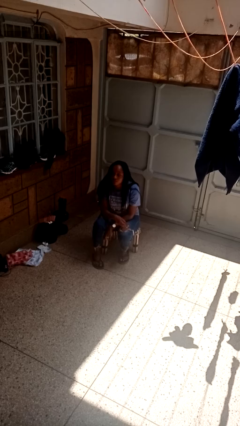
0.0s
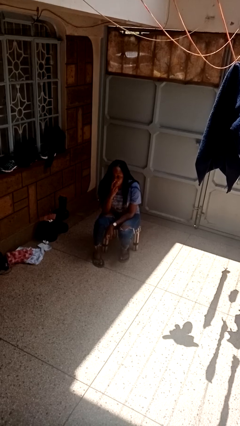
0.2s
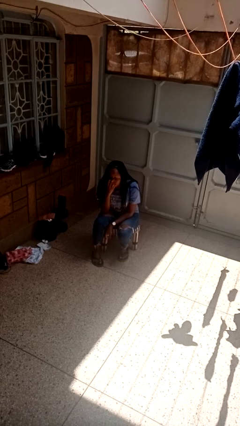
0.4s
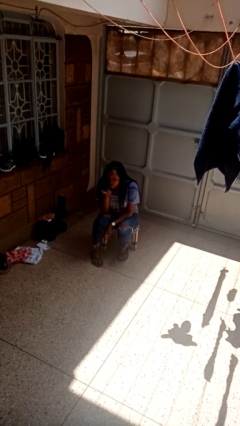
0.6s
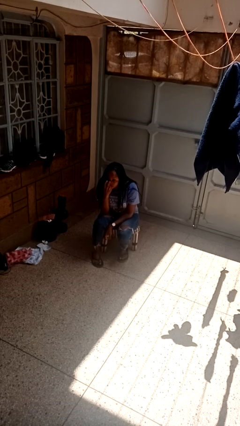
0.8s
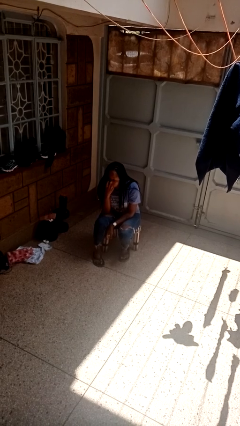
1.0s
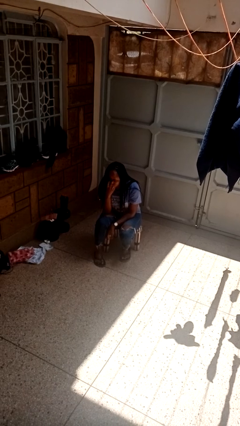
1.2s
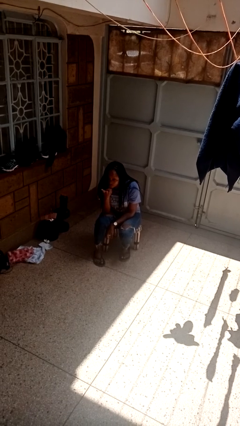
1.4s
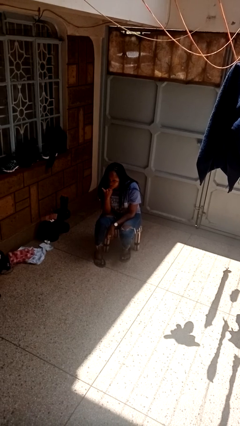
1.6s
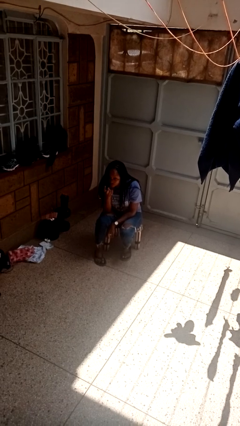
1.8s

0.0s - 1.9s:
person gestures watch closely

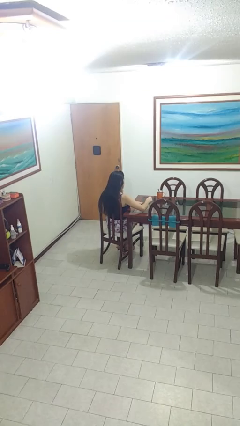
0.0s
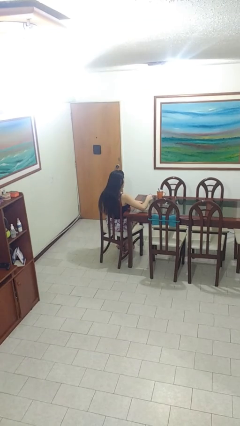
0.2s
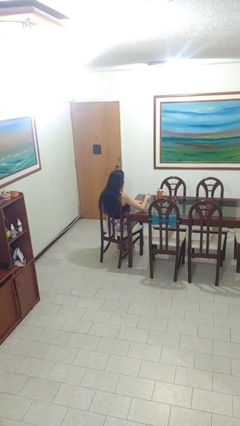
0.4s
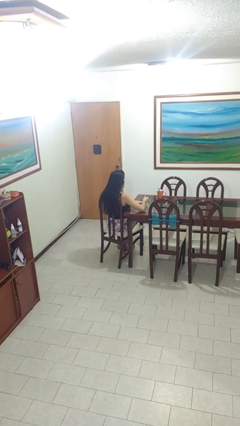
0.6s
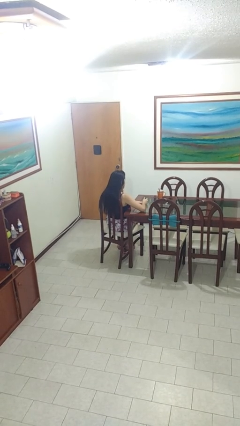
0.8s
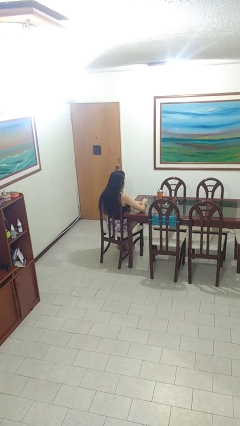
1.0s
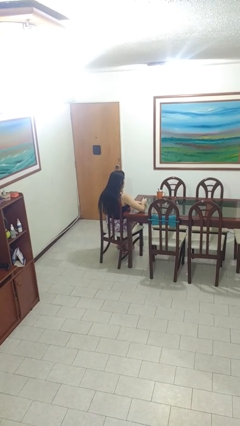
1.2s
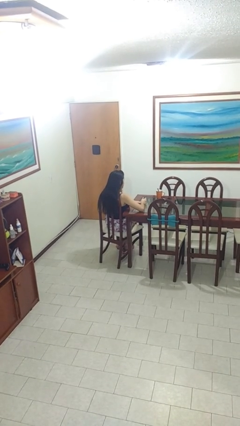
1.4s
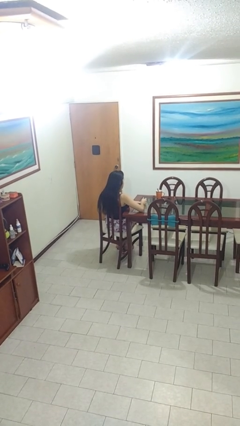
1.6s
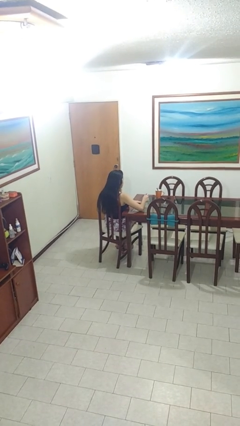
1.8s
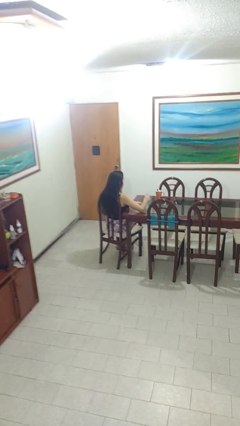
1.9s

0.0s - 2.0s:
person paints fingernails

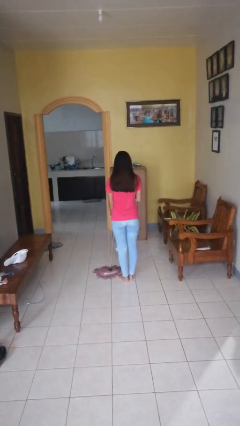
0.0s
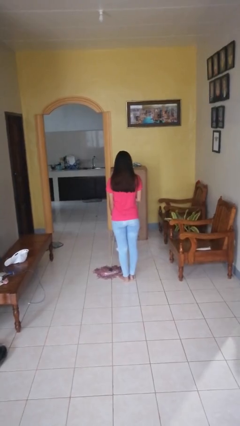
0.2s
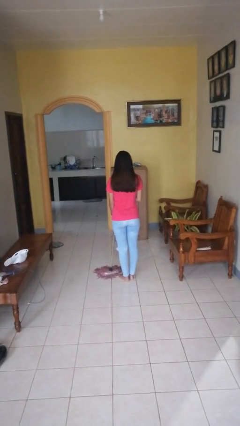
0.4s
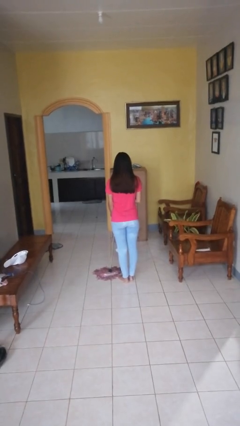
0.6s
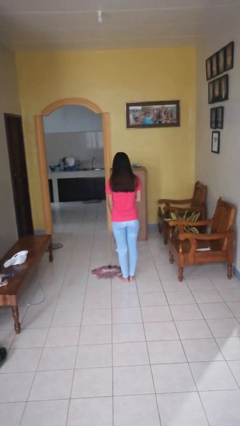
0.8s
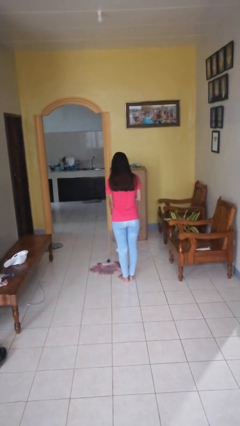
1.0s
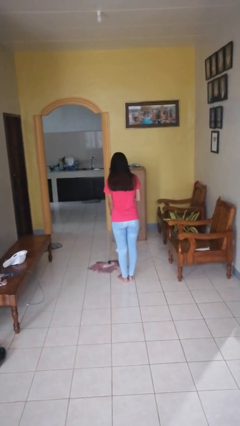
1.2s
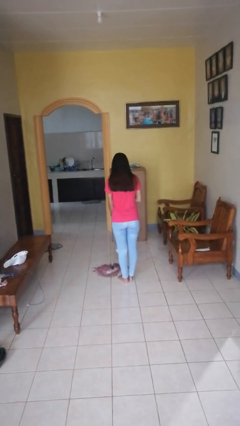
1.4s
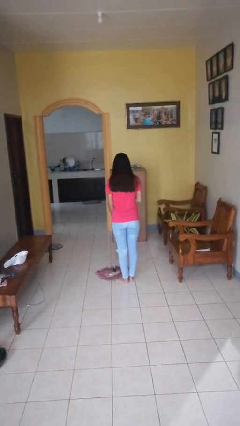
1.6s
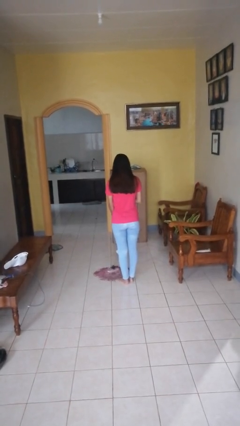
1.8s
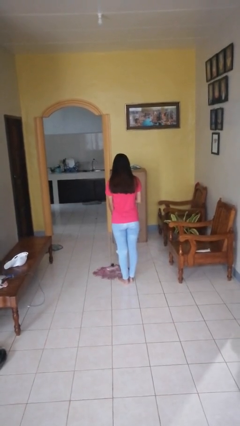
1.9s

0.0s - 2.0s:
person mops

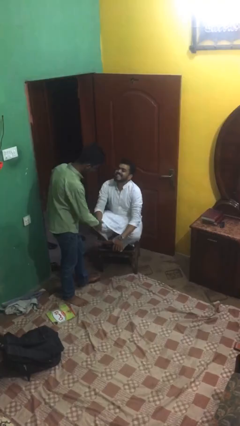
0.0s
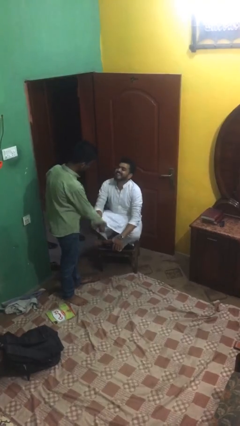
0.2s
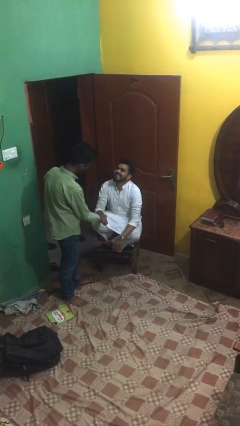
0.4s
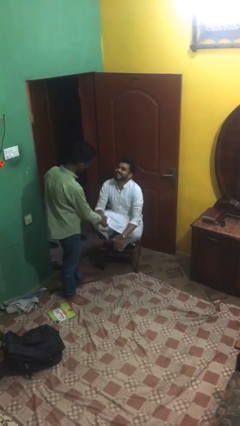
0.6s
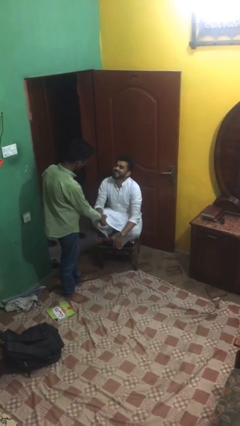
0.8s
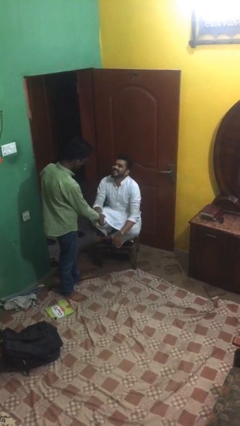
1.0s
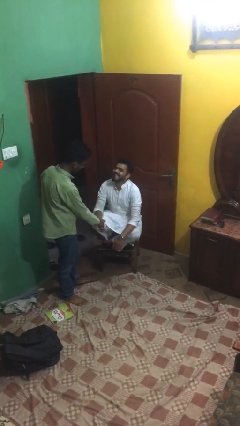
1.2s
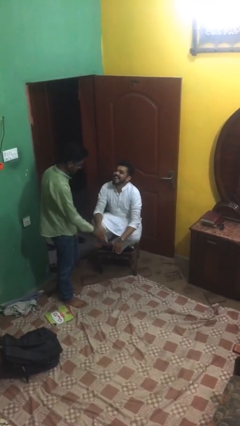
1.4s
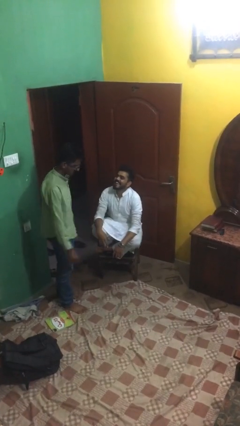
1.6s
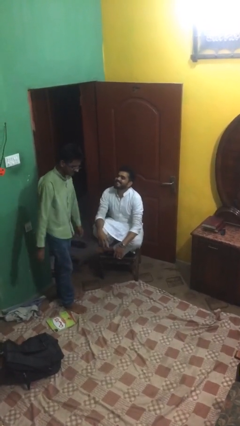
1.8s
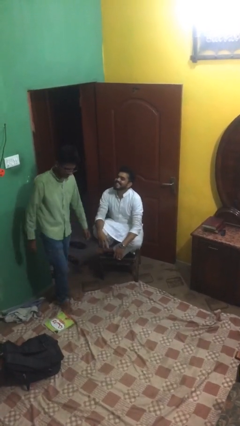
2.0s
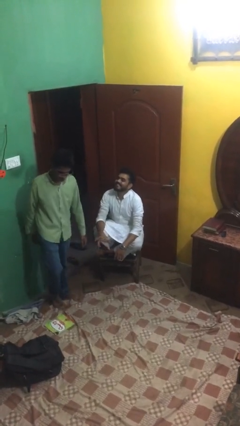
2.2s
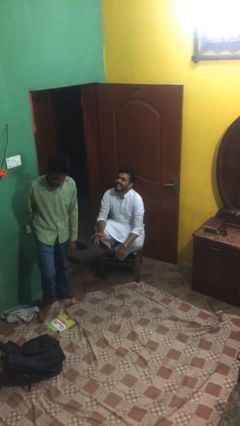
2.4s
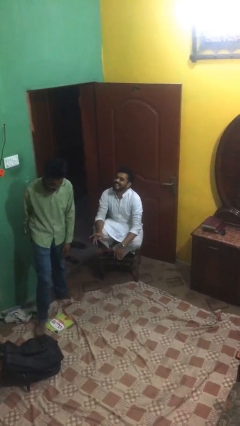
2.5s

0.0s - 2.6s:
person shakes hand

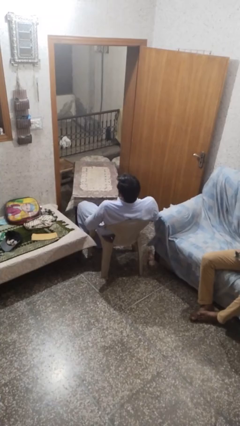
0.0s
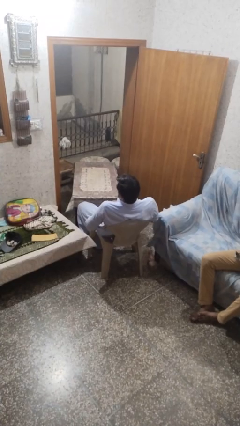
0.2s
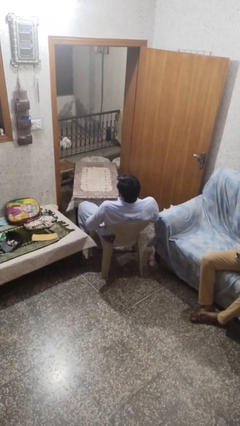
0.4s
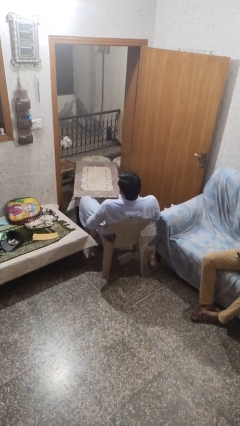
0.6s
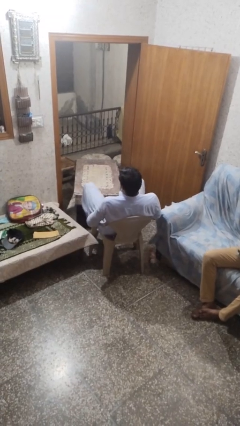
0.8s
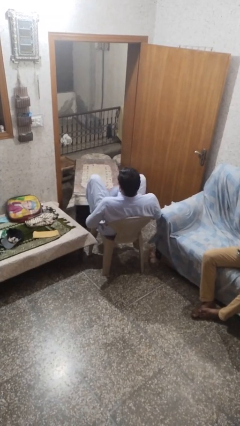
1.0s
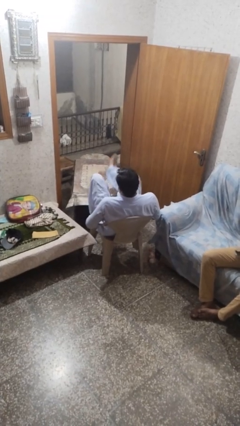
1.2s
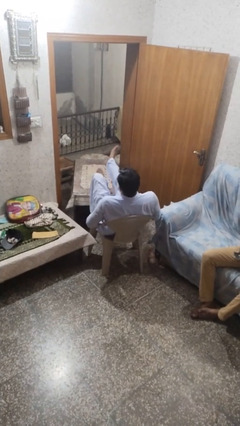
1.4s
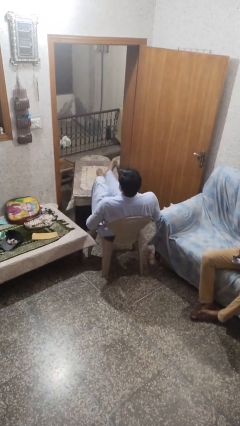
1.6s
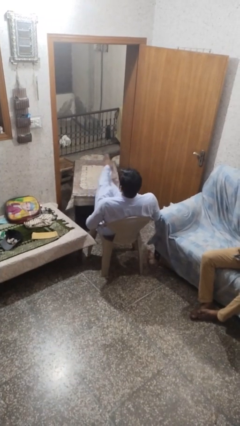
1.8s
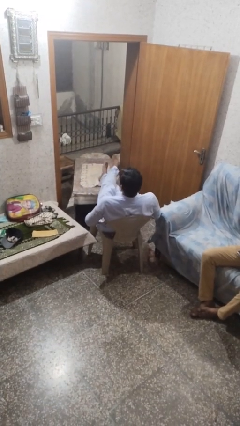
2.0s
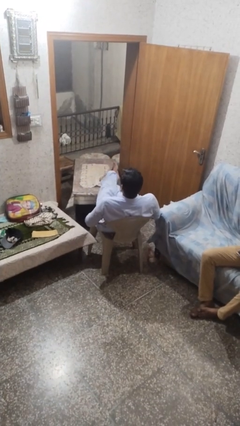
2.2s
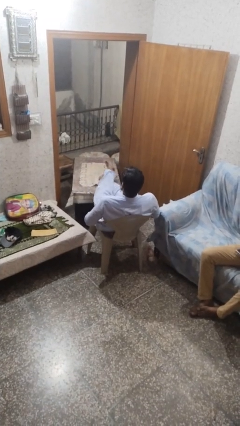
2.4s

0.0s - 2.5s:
person puts feet up

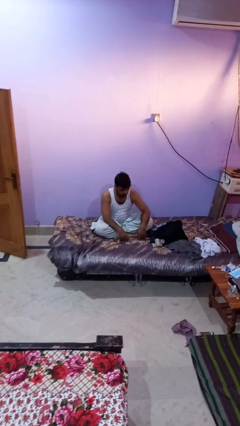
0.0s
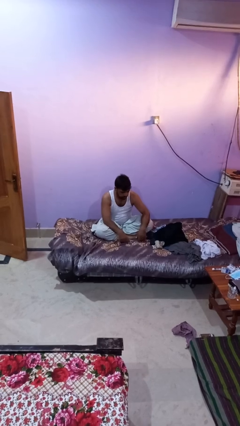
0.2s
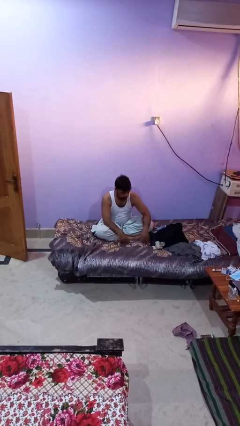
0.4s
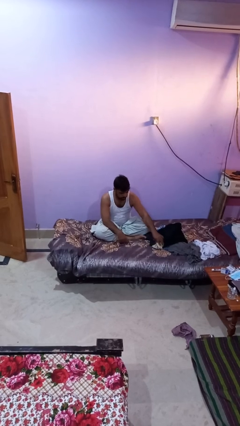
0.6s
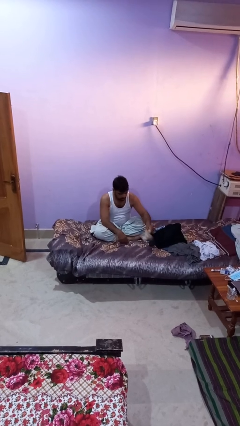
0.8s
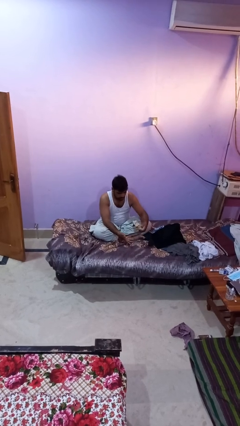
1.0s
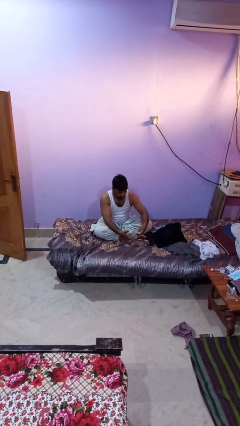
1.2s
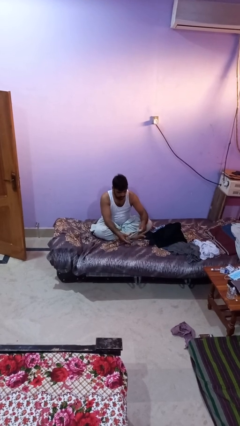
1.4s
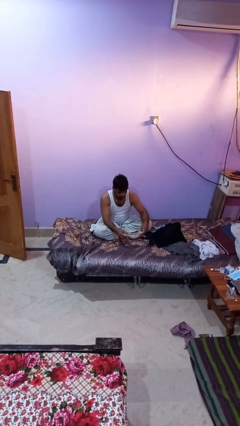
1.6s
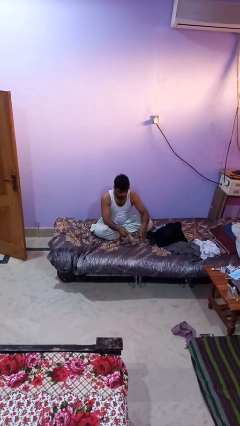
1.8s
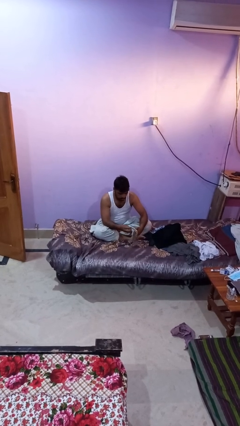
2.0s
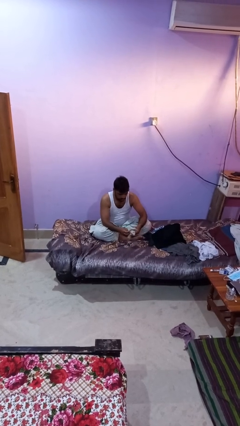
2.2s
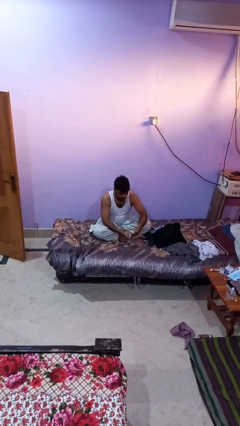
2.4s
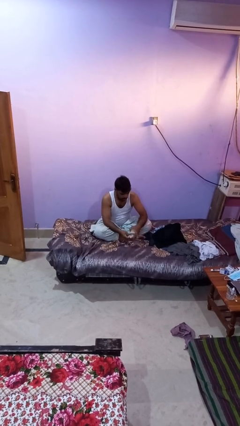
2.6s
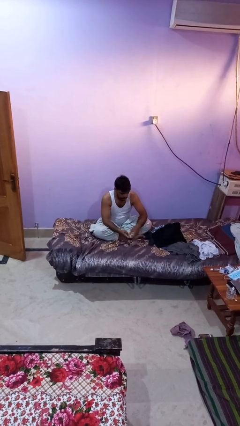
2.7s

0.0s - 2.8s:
person folds socks

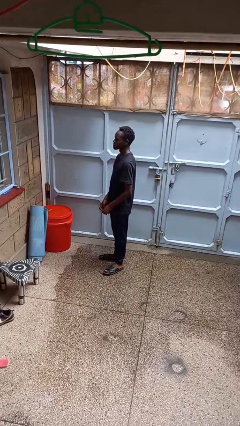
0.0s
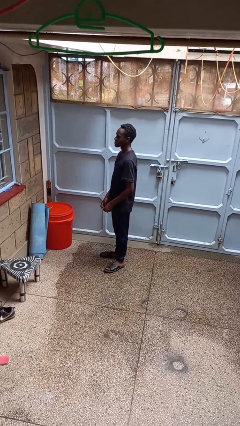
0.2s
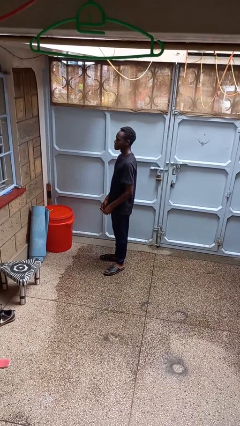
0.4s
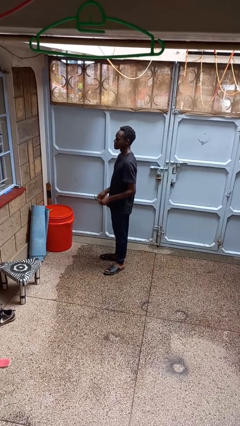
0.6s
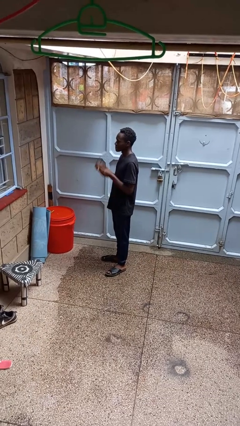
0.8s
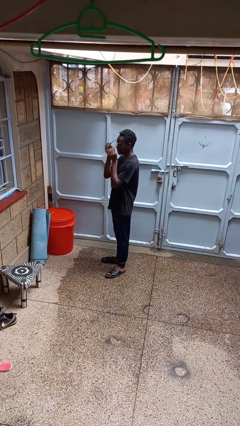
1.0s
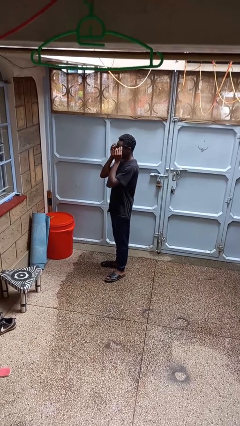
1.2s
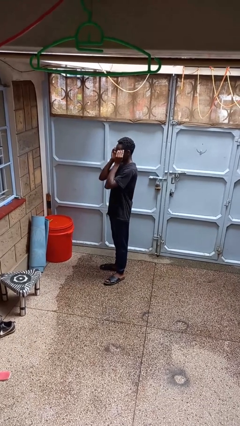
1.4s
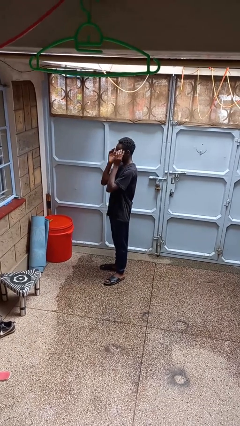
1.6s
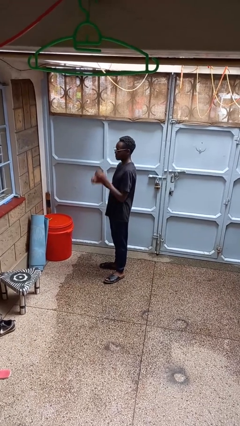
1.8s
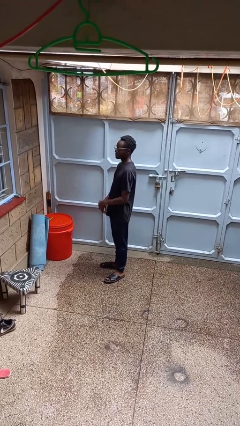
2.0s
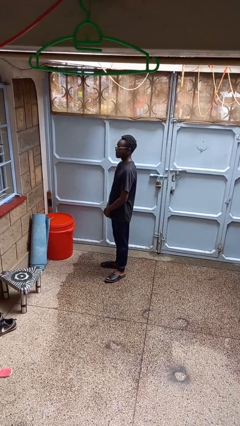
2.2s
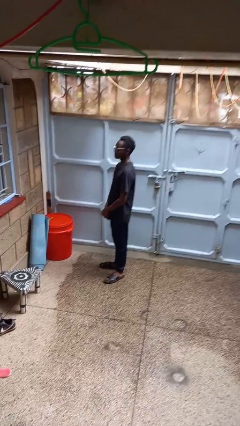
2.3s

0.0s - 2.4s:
person puts on glasses

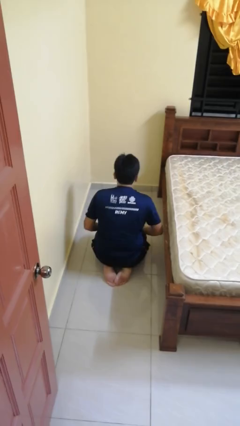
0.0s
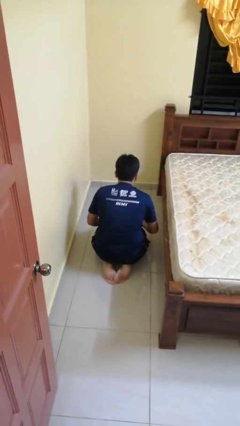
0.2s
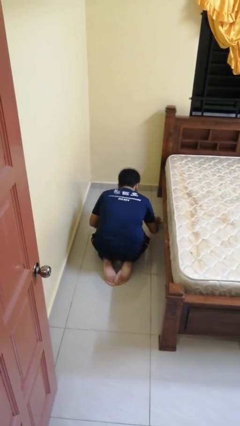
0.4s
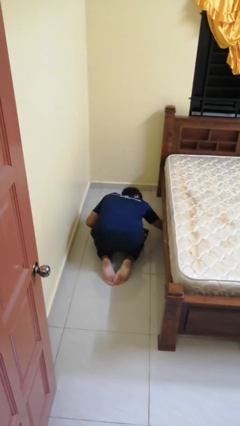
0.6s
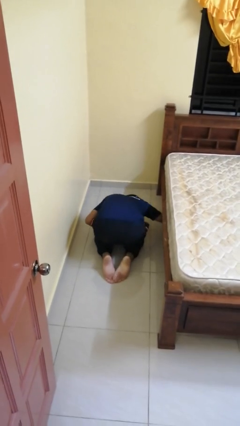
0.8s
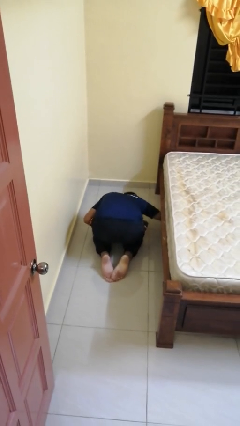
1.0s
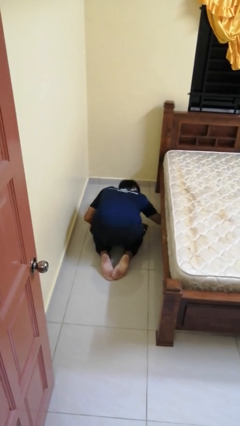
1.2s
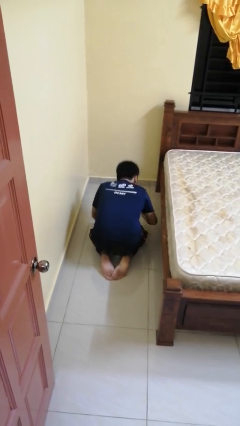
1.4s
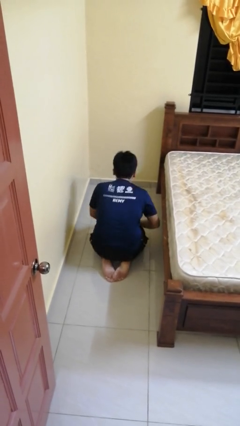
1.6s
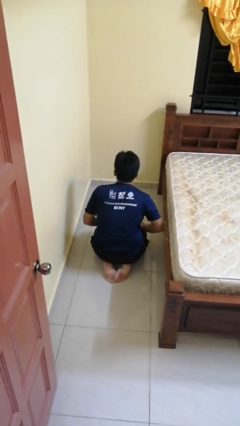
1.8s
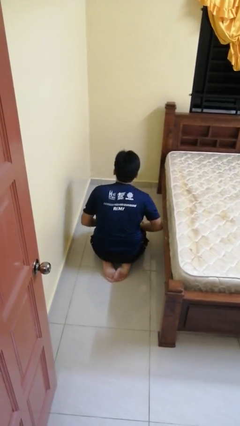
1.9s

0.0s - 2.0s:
person searches under bed
